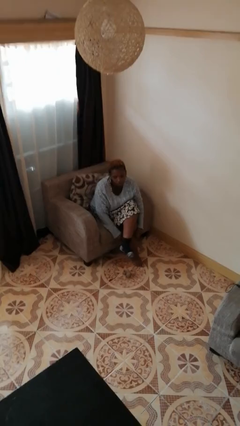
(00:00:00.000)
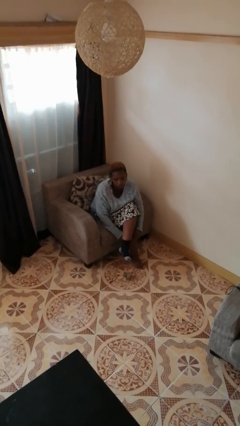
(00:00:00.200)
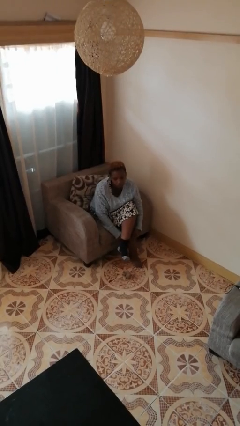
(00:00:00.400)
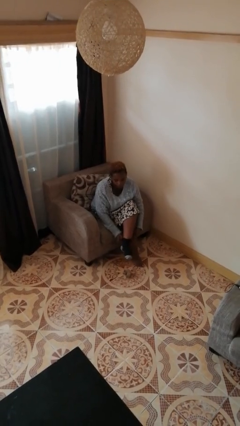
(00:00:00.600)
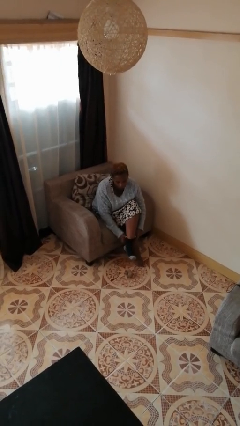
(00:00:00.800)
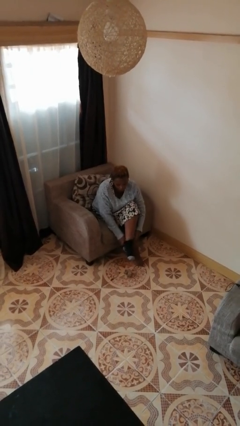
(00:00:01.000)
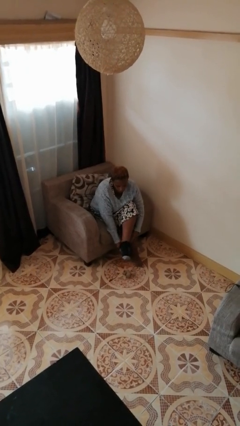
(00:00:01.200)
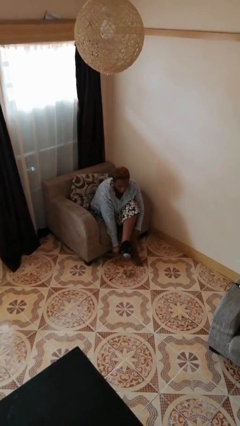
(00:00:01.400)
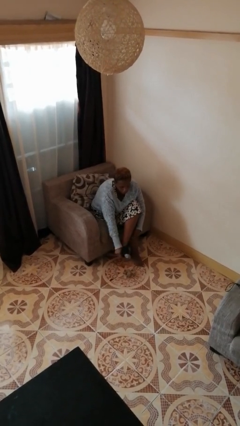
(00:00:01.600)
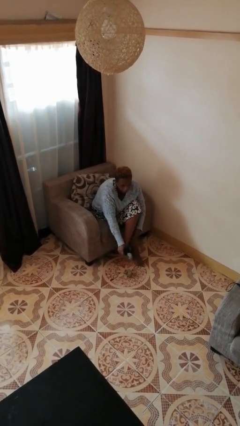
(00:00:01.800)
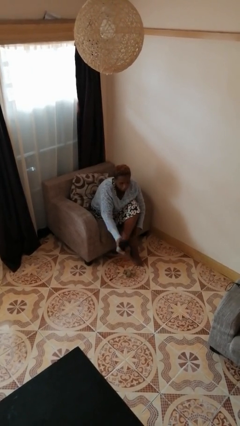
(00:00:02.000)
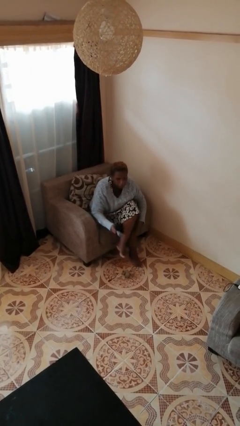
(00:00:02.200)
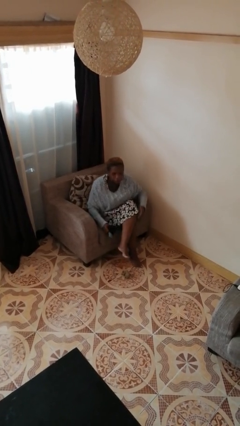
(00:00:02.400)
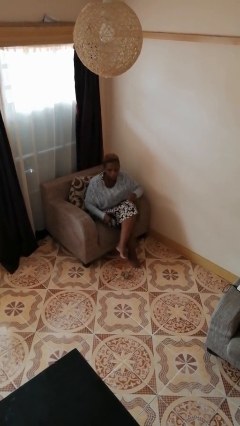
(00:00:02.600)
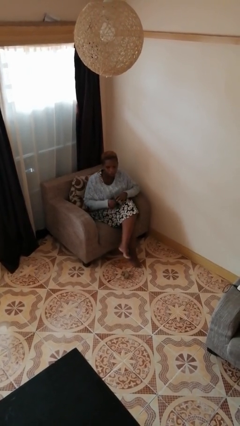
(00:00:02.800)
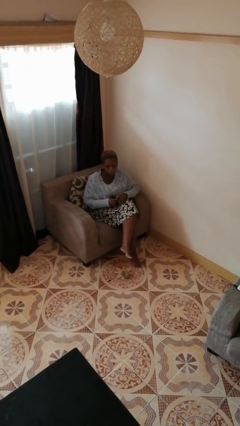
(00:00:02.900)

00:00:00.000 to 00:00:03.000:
person takes off socks

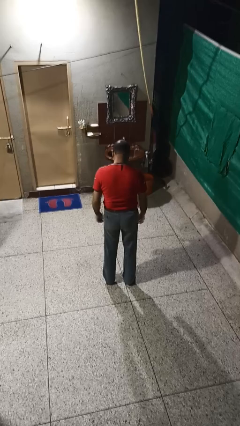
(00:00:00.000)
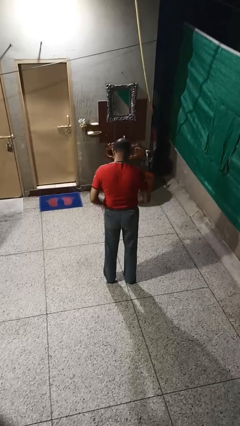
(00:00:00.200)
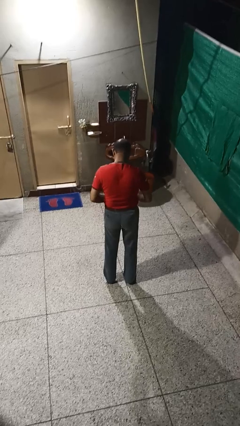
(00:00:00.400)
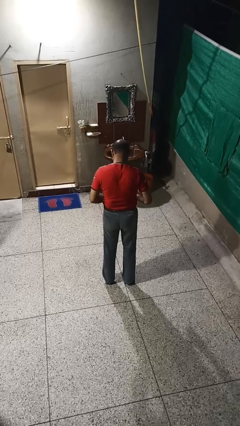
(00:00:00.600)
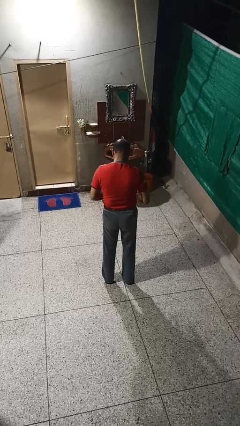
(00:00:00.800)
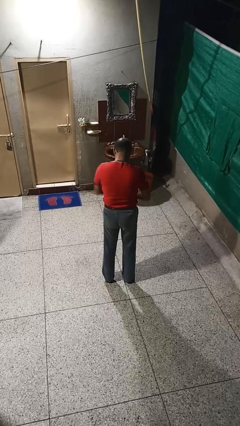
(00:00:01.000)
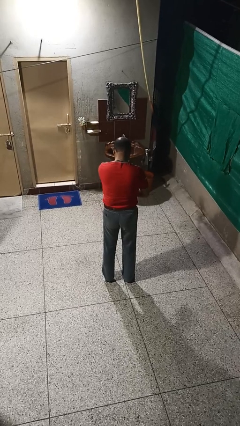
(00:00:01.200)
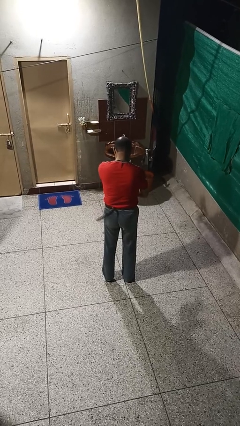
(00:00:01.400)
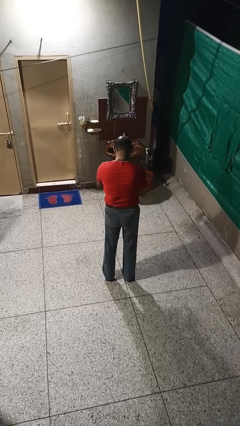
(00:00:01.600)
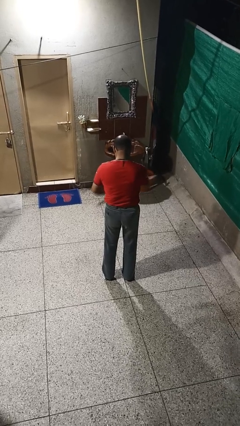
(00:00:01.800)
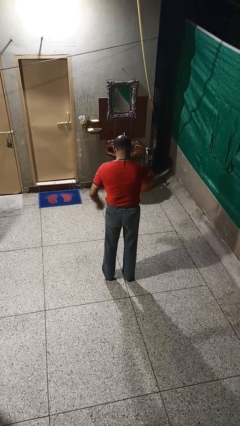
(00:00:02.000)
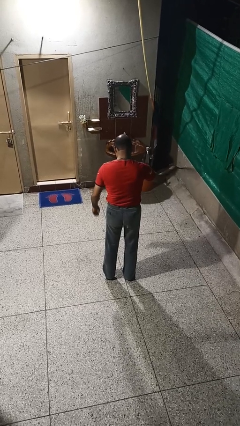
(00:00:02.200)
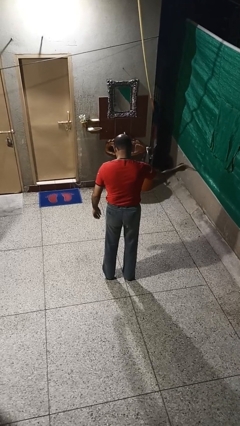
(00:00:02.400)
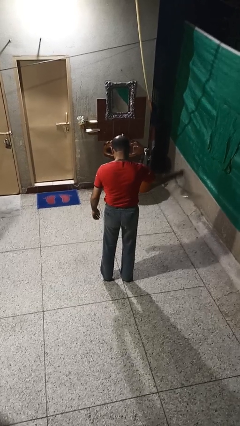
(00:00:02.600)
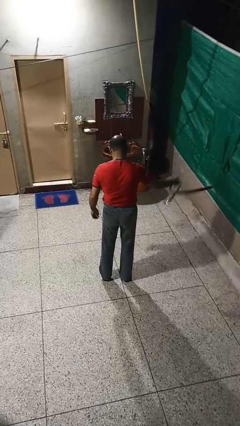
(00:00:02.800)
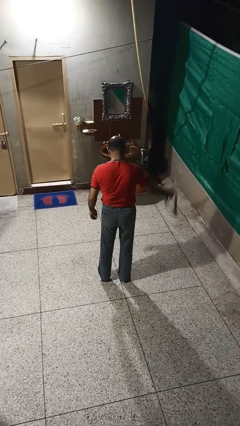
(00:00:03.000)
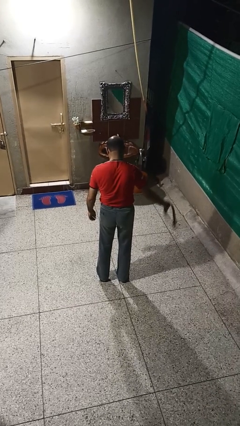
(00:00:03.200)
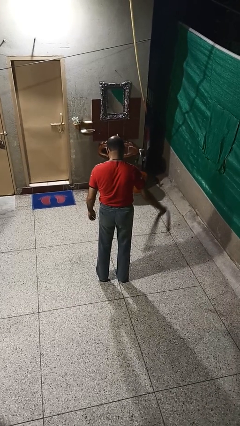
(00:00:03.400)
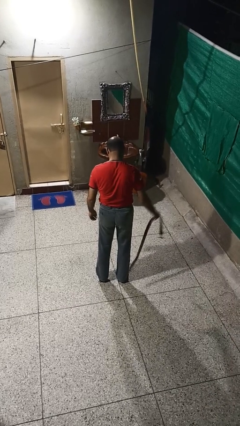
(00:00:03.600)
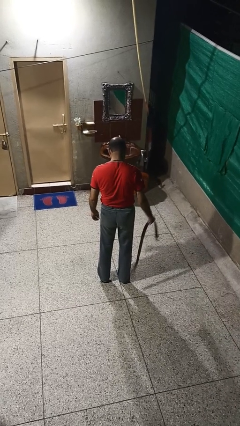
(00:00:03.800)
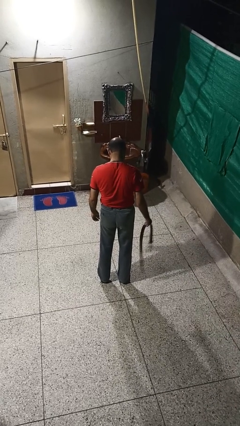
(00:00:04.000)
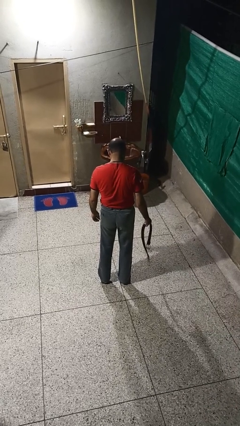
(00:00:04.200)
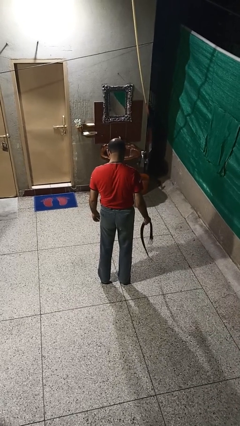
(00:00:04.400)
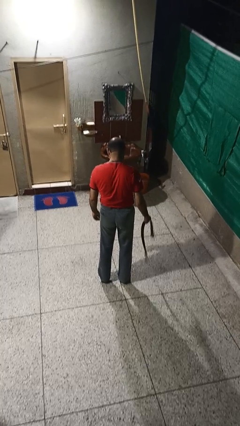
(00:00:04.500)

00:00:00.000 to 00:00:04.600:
person takes off belt

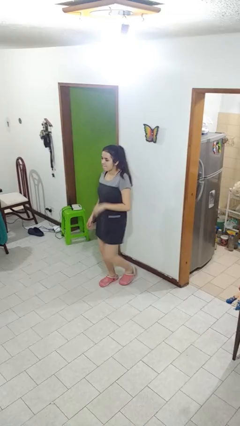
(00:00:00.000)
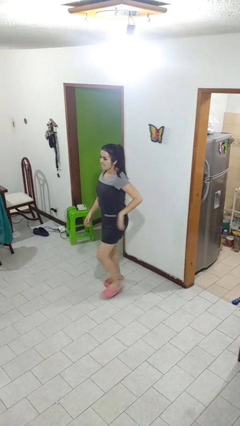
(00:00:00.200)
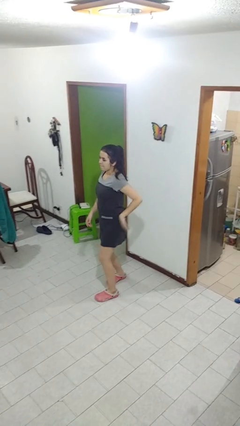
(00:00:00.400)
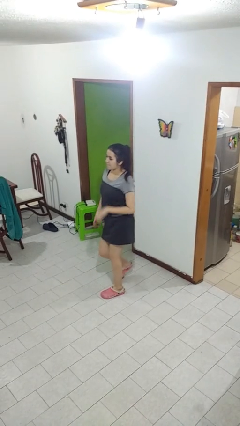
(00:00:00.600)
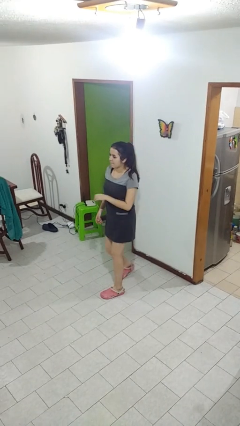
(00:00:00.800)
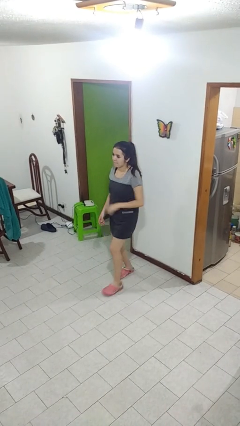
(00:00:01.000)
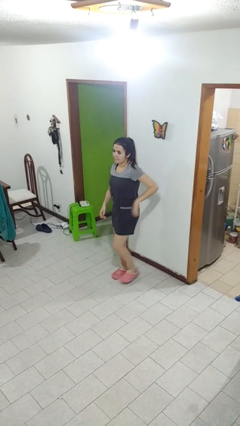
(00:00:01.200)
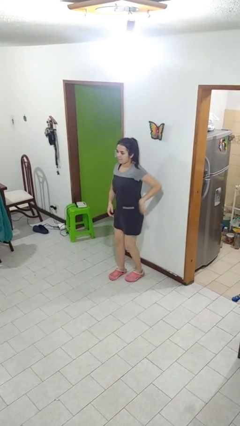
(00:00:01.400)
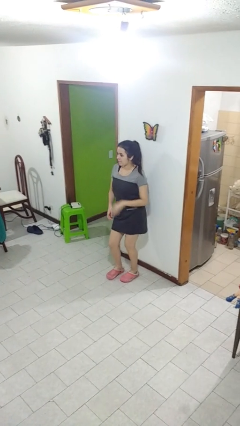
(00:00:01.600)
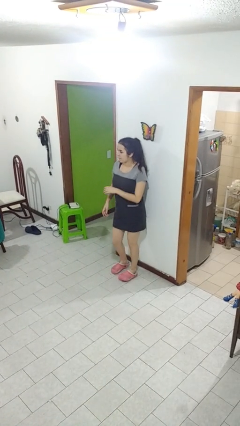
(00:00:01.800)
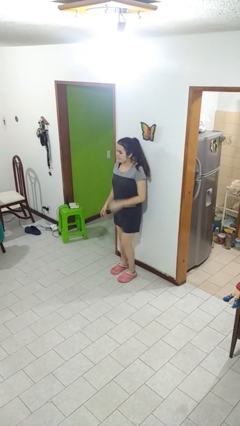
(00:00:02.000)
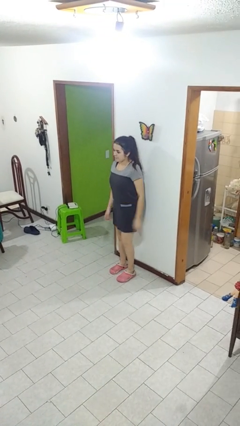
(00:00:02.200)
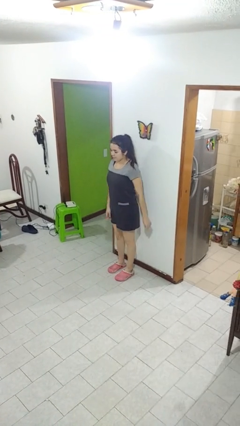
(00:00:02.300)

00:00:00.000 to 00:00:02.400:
person dances in place

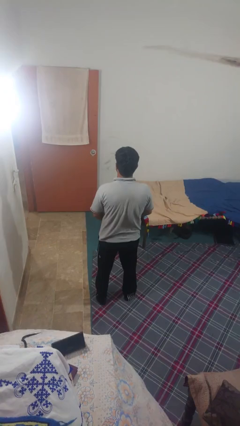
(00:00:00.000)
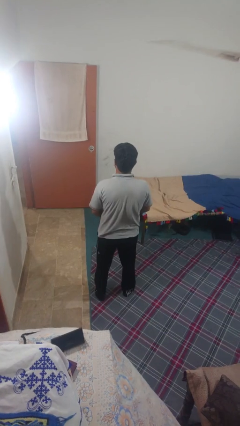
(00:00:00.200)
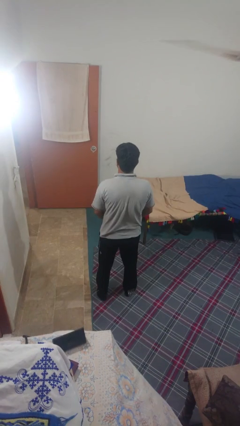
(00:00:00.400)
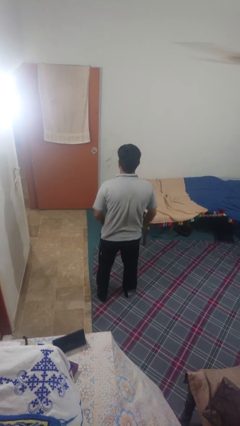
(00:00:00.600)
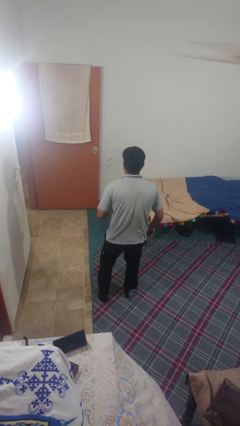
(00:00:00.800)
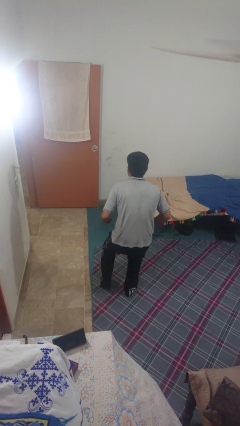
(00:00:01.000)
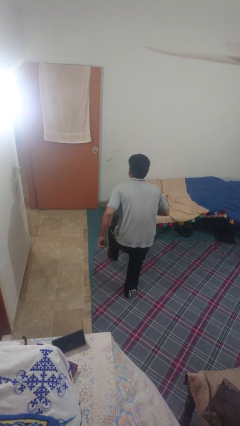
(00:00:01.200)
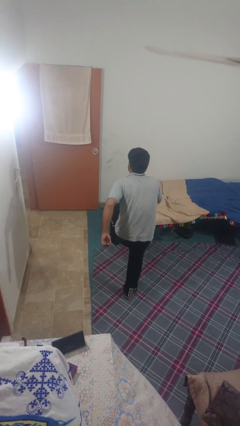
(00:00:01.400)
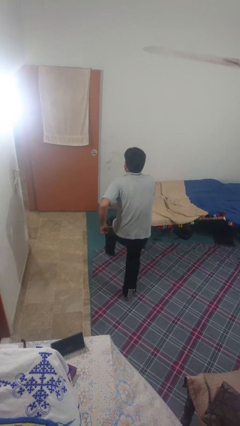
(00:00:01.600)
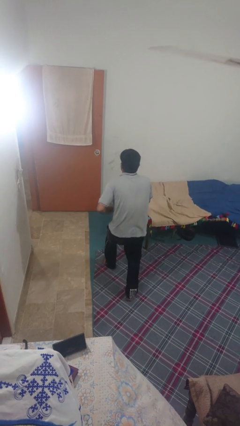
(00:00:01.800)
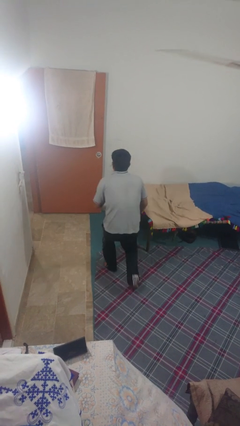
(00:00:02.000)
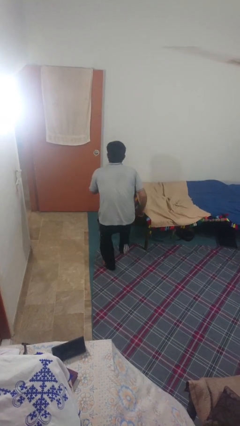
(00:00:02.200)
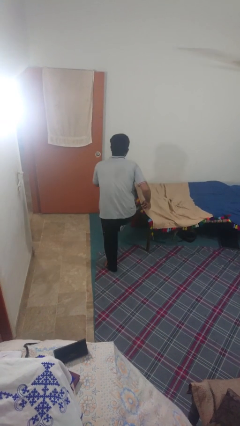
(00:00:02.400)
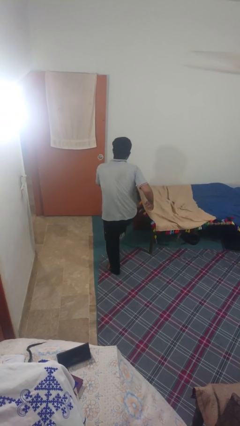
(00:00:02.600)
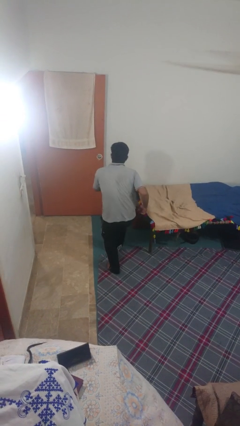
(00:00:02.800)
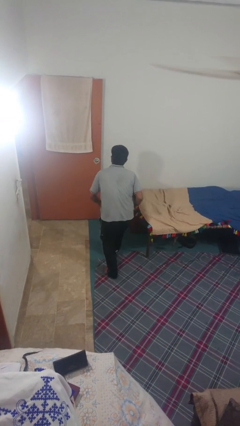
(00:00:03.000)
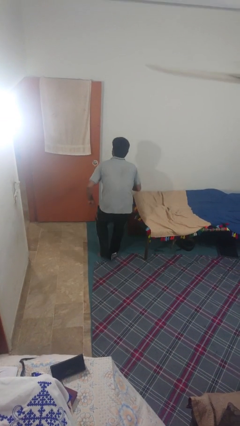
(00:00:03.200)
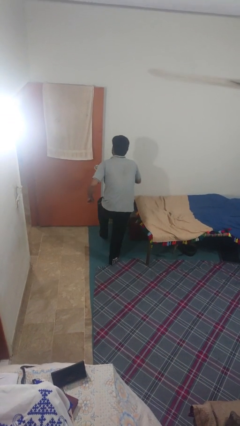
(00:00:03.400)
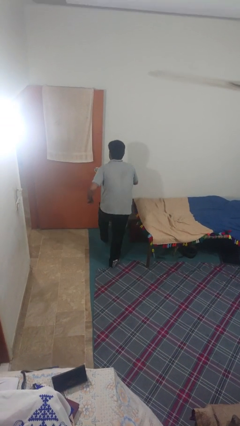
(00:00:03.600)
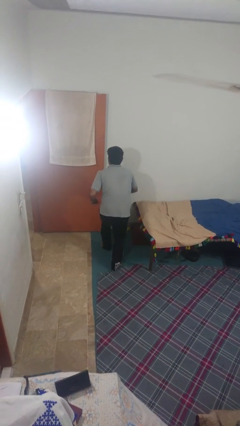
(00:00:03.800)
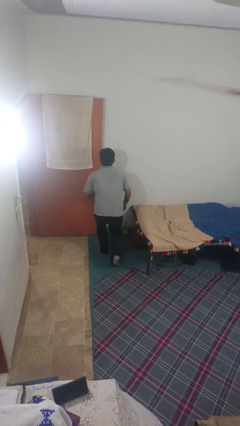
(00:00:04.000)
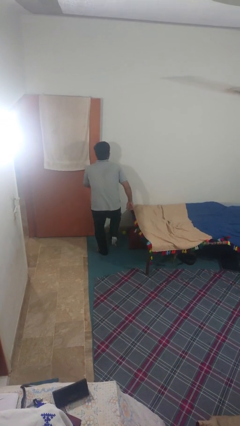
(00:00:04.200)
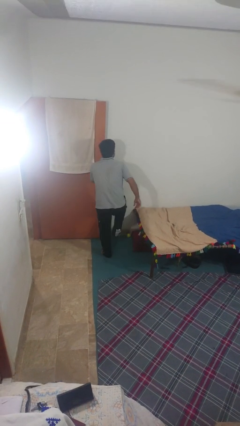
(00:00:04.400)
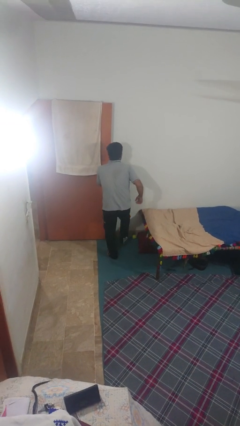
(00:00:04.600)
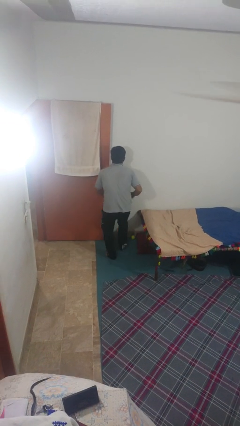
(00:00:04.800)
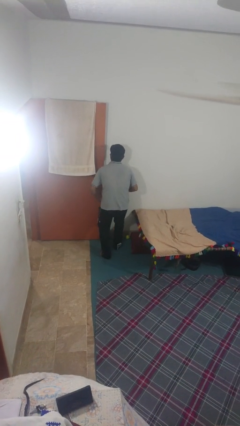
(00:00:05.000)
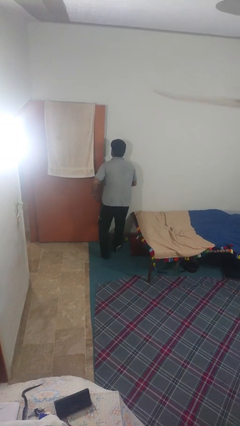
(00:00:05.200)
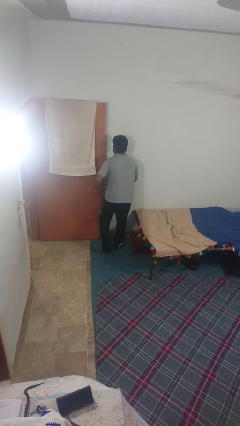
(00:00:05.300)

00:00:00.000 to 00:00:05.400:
person walks tiptoe

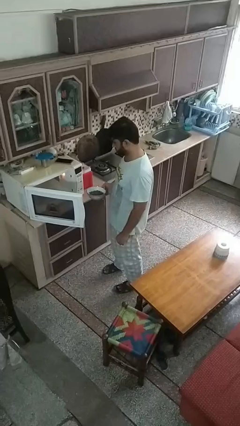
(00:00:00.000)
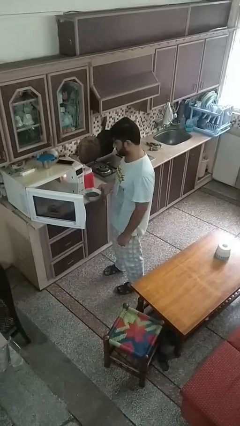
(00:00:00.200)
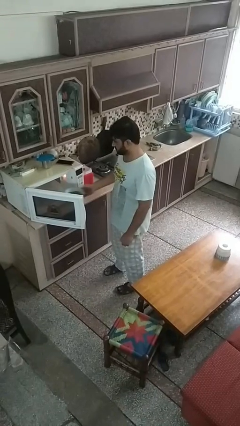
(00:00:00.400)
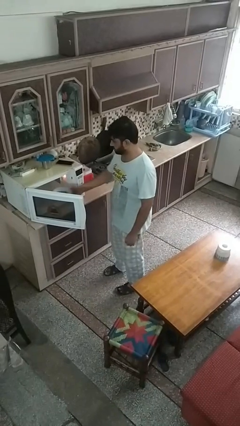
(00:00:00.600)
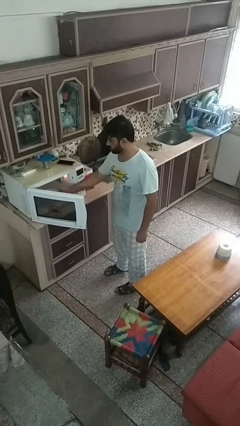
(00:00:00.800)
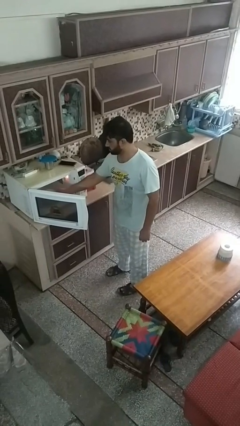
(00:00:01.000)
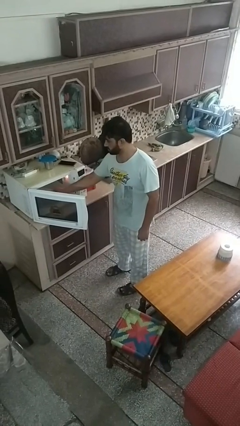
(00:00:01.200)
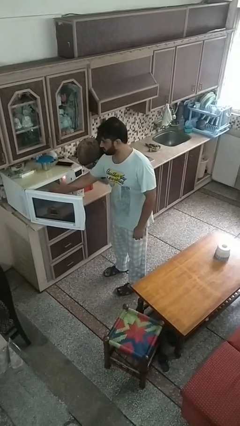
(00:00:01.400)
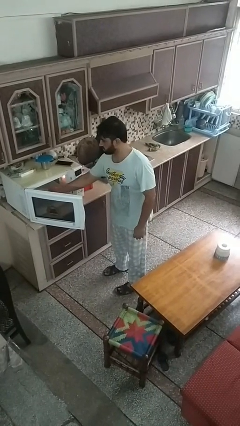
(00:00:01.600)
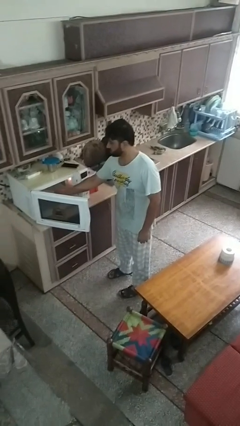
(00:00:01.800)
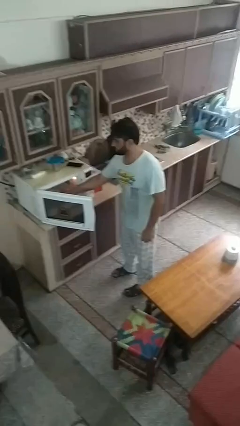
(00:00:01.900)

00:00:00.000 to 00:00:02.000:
person puts object into oven
